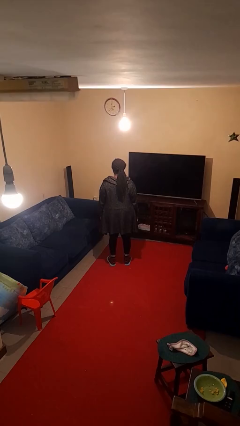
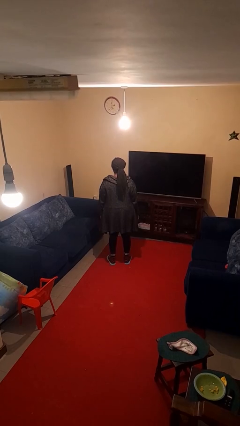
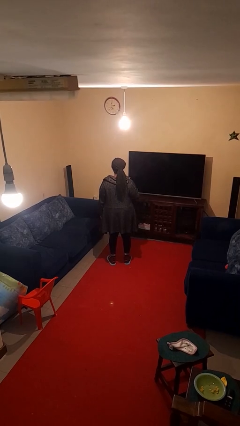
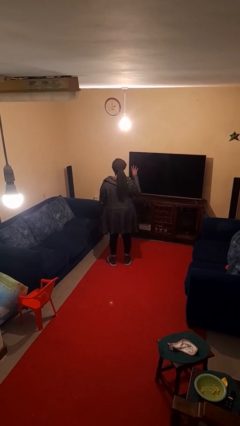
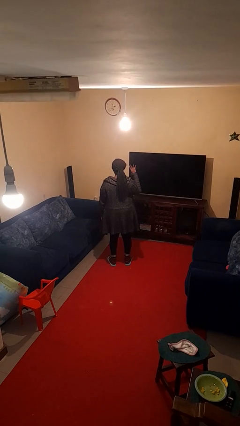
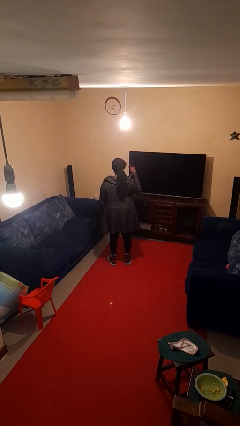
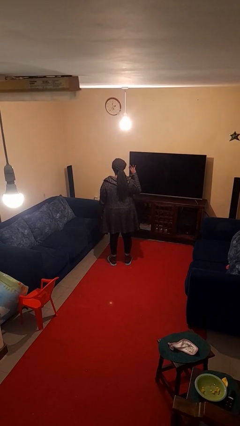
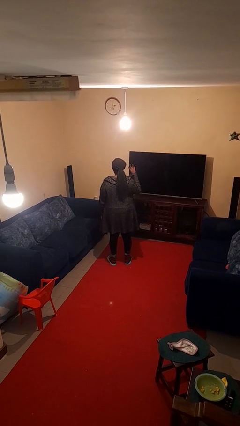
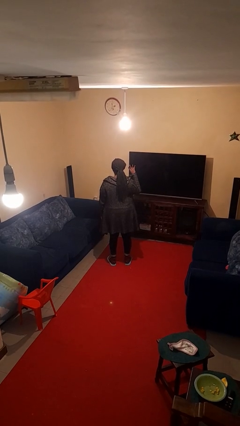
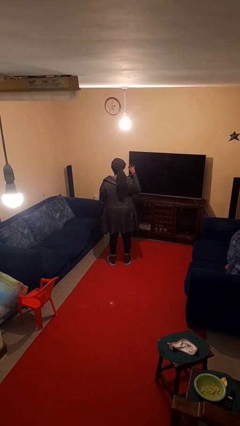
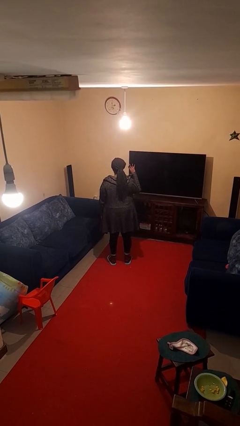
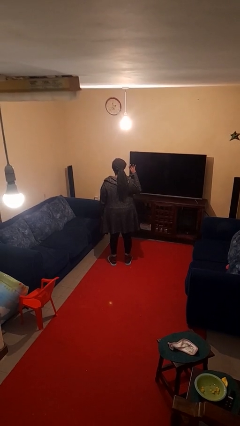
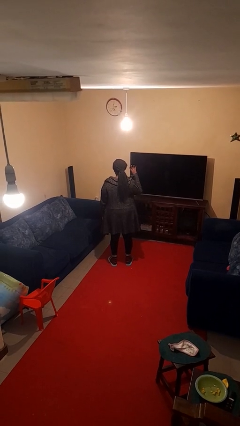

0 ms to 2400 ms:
person gestures number four

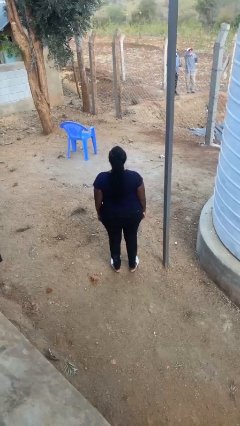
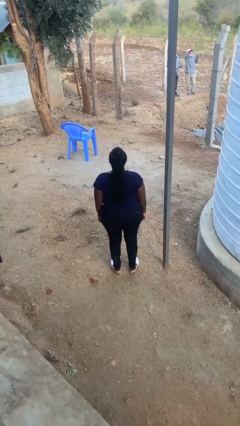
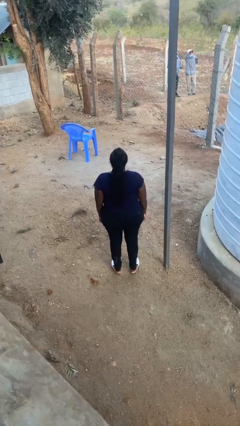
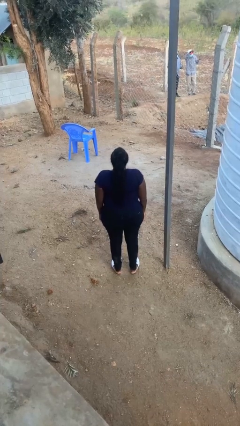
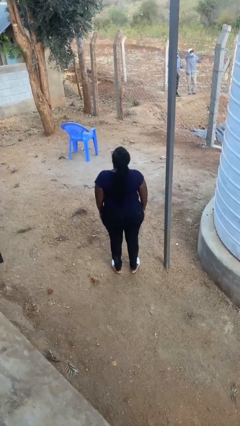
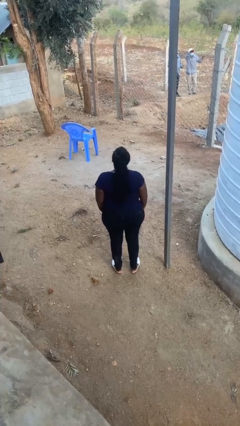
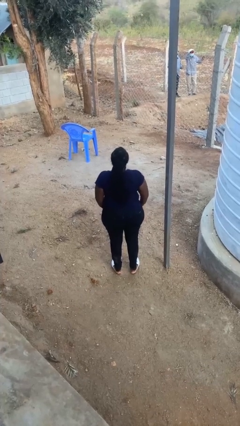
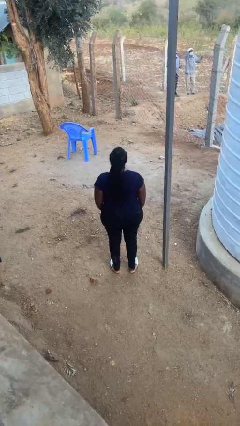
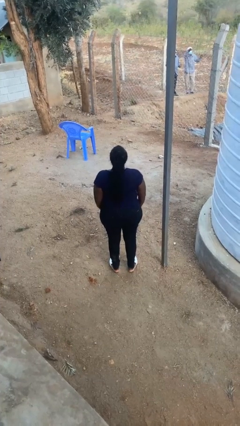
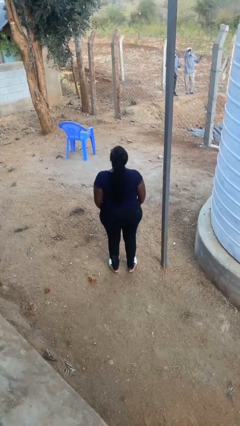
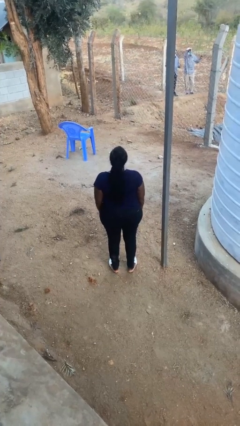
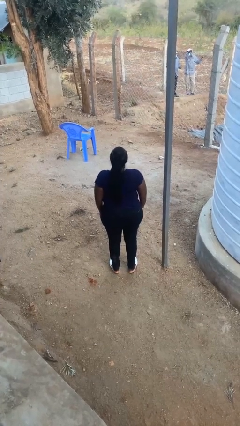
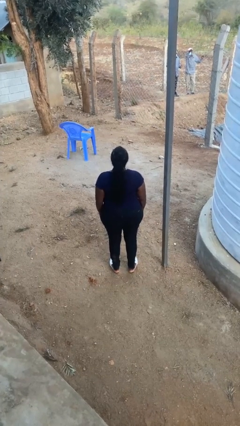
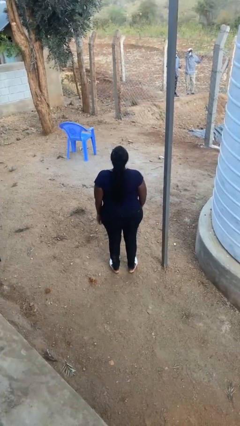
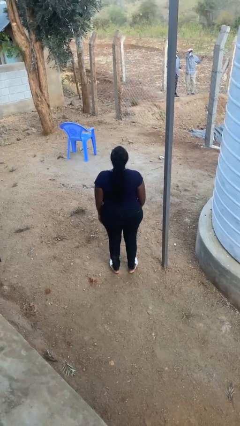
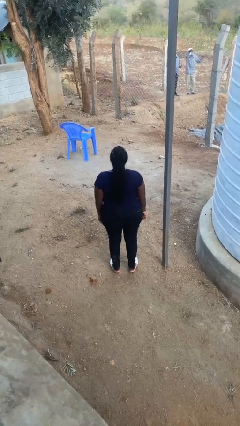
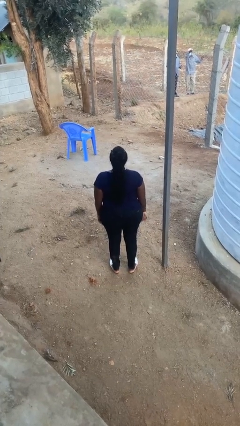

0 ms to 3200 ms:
person shrugs

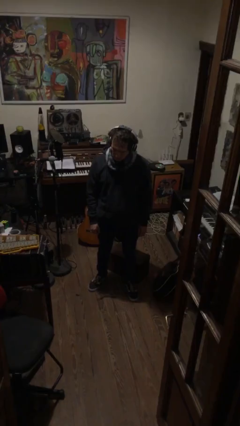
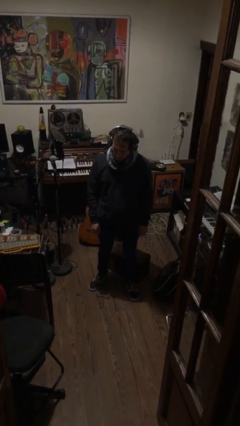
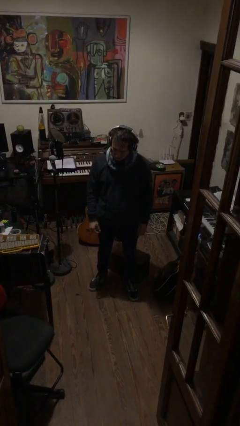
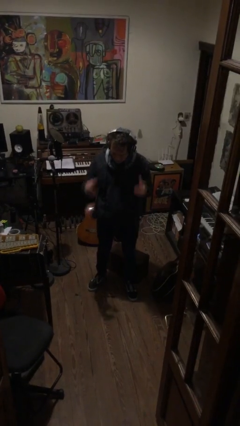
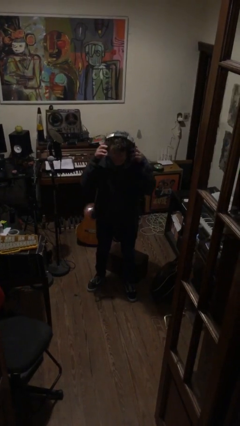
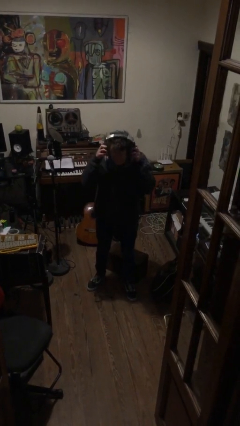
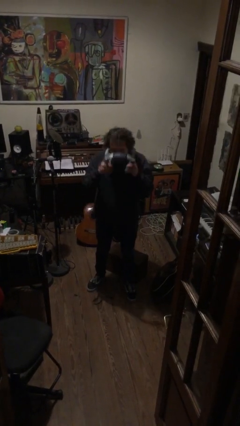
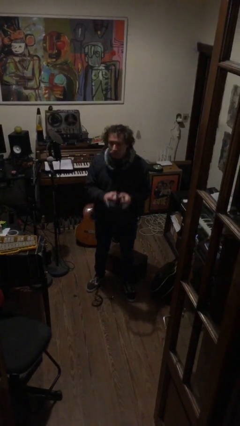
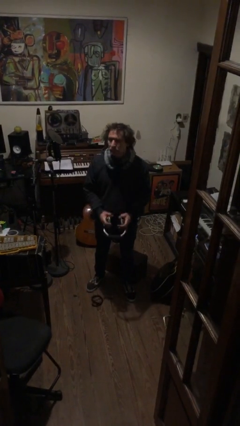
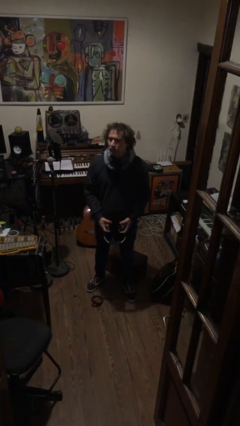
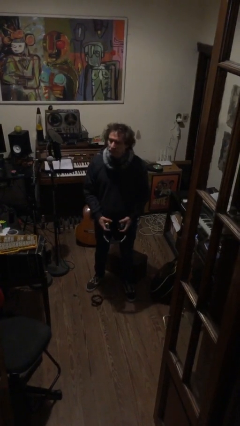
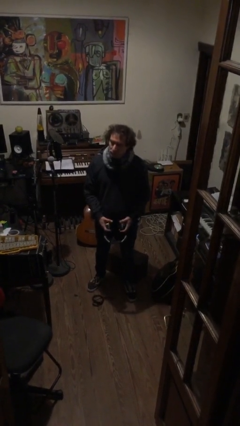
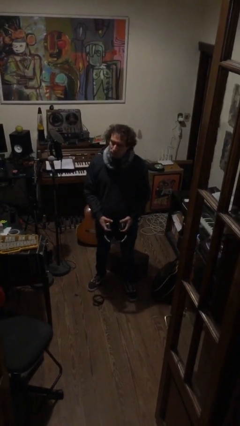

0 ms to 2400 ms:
person takes off headphones

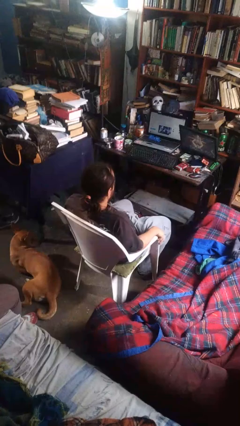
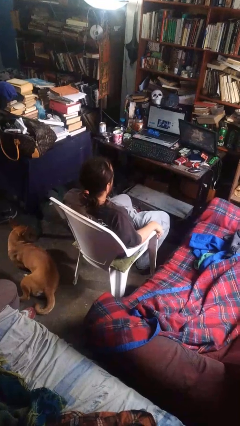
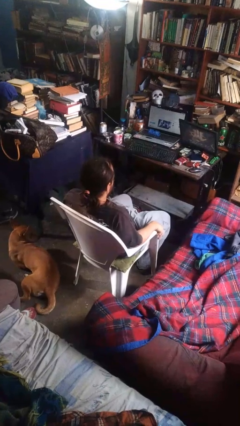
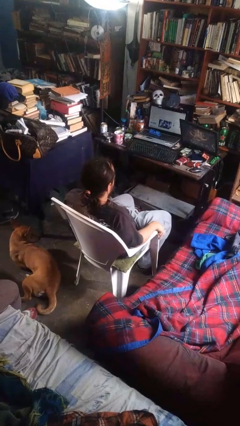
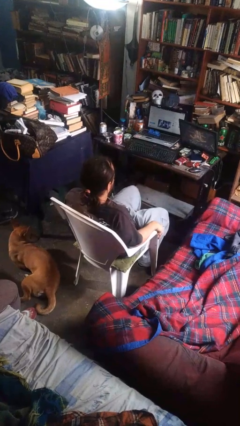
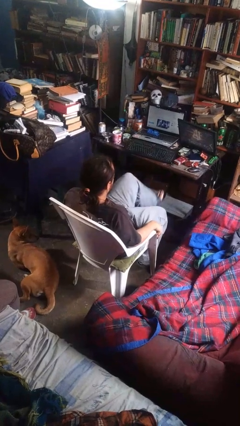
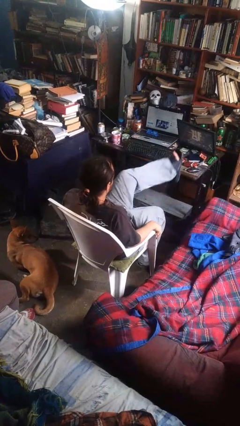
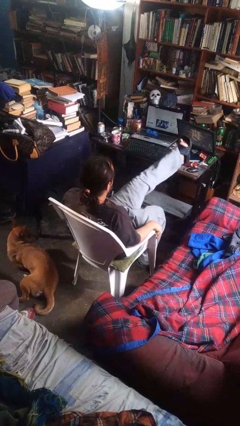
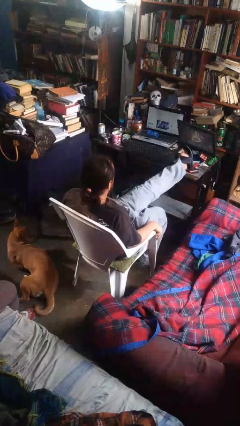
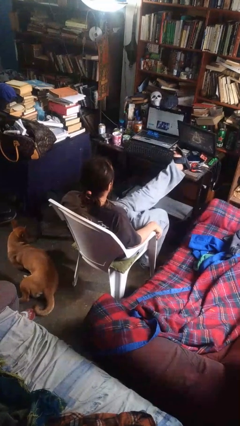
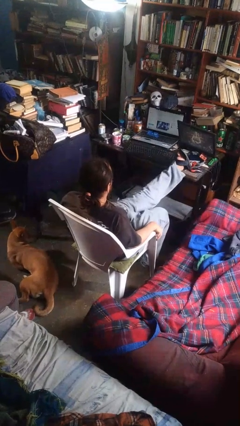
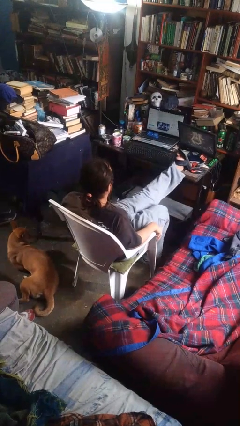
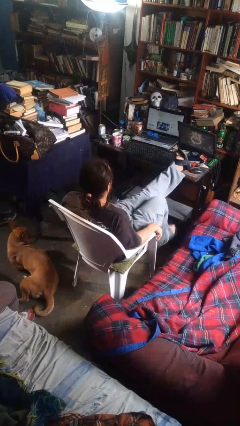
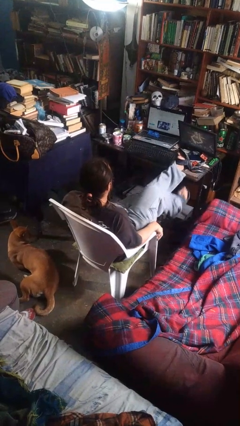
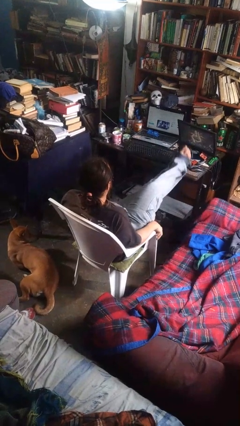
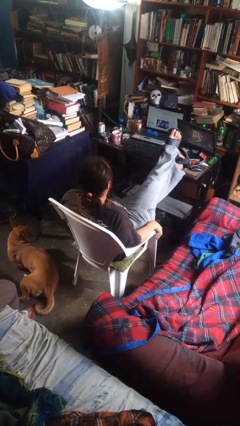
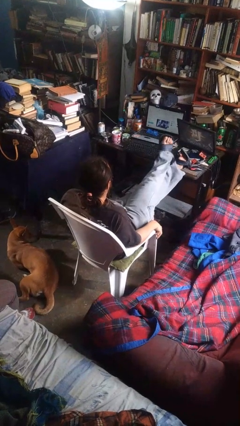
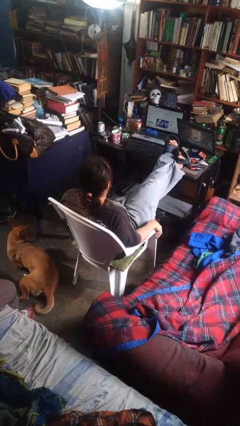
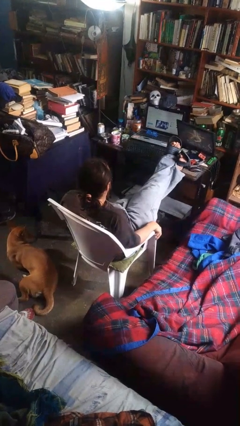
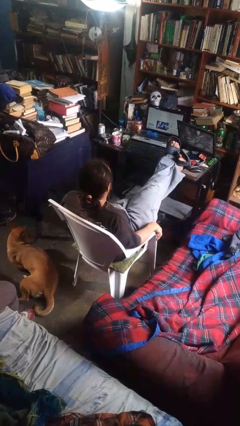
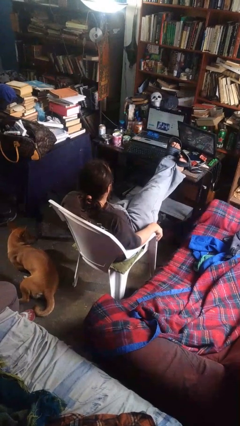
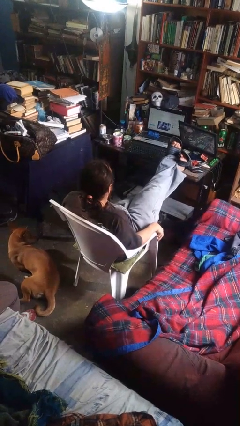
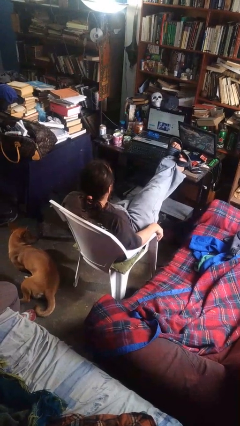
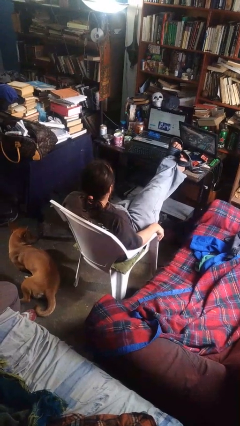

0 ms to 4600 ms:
person puts feet up

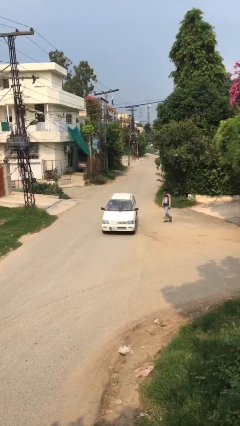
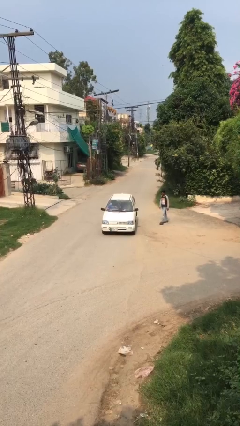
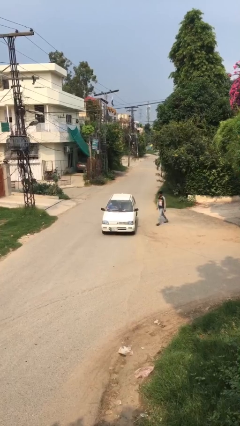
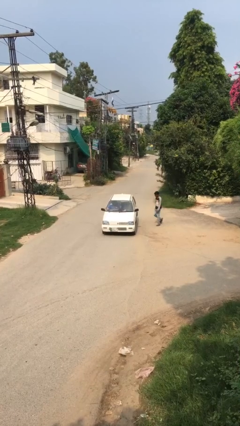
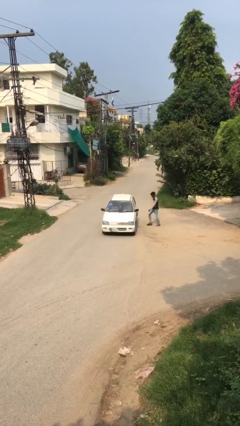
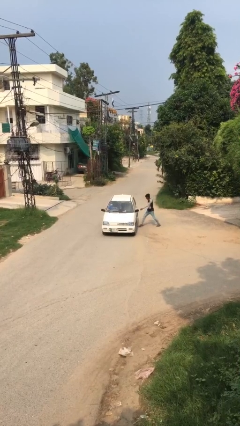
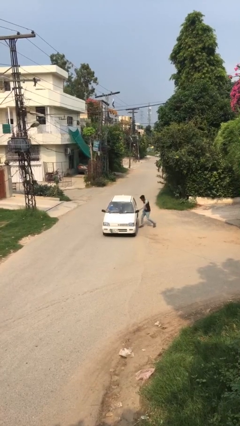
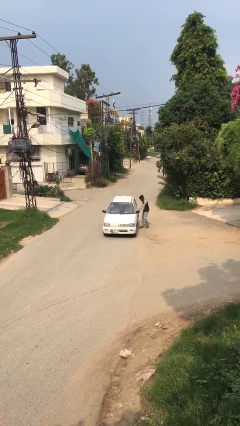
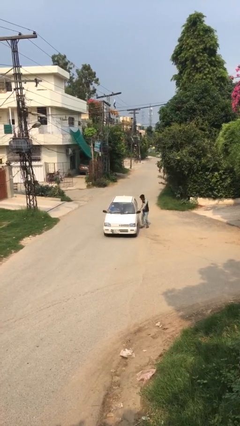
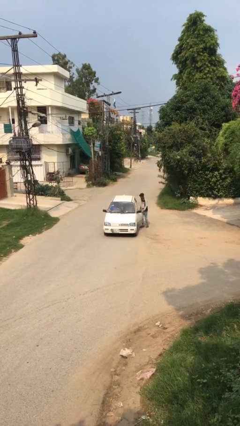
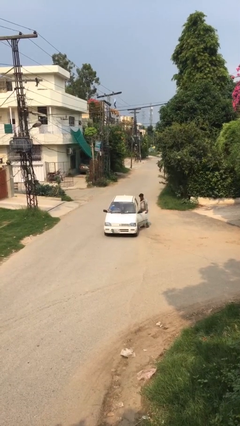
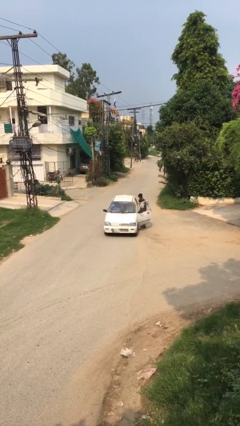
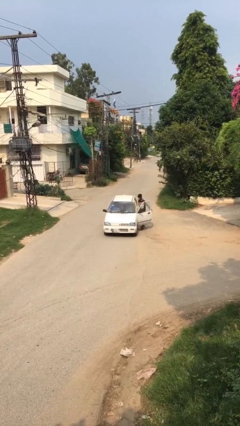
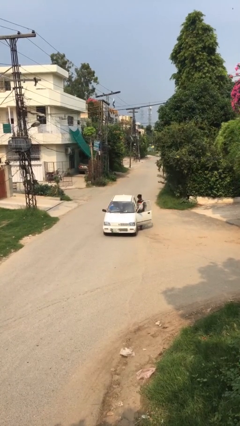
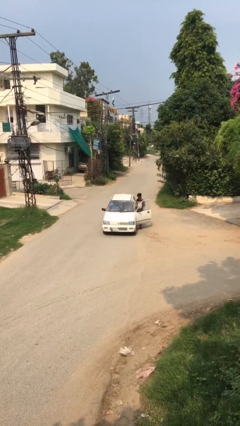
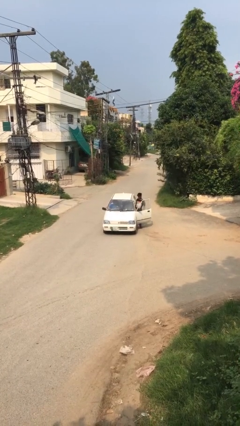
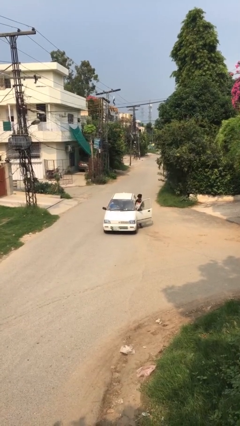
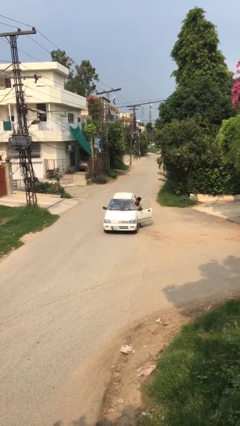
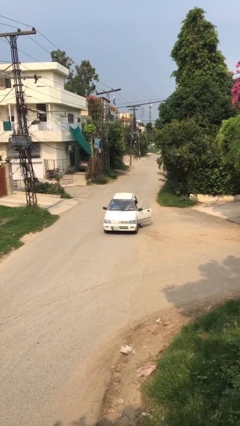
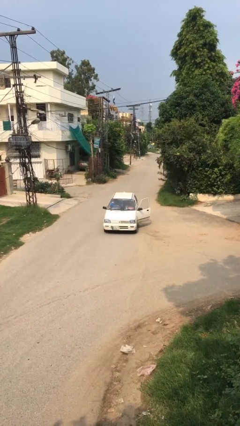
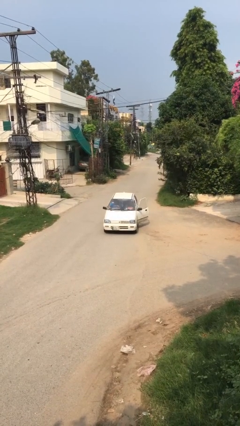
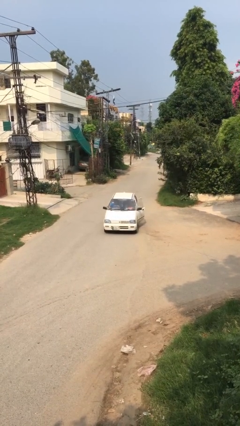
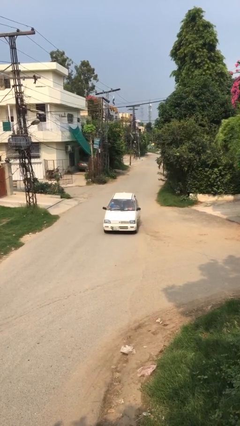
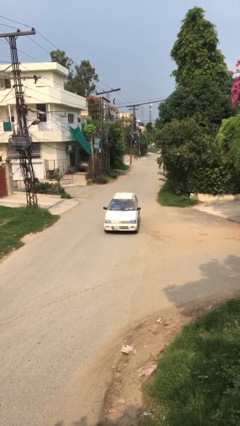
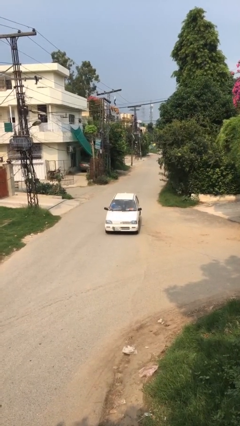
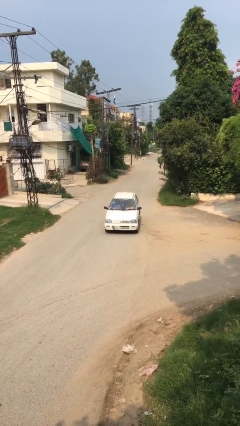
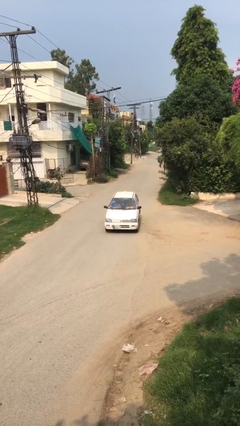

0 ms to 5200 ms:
car picks up person
